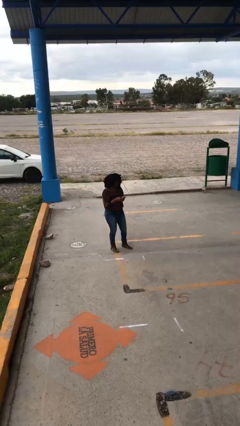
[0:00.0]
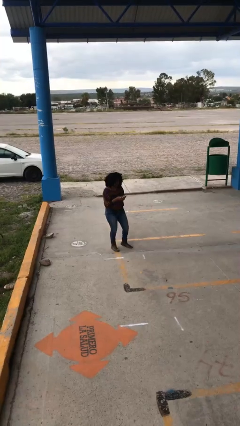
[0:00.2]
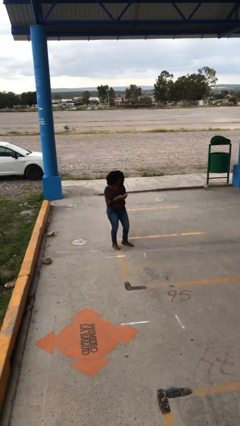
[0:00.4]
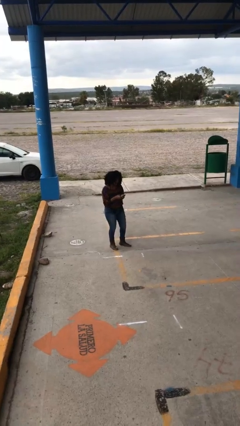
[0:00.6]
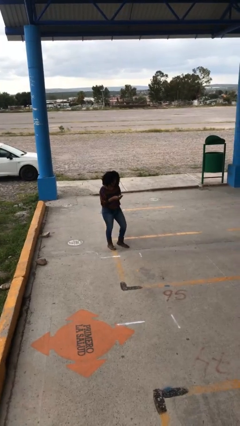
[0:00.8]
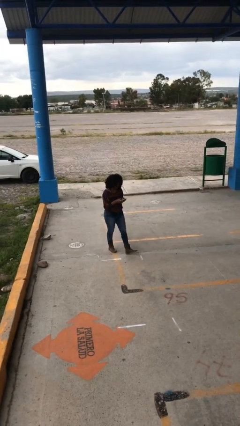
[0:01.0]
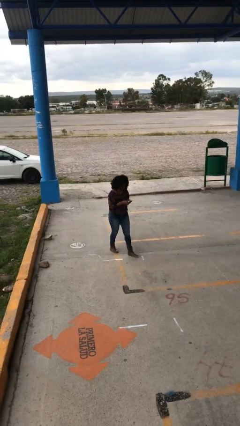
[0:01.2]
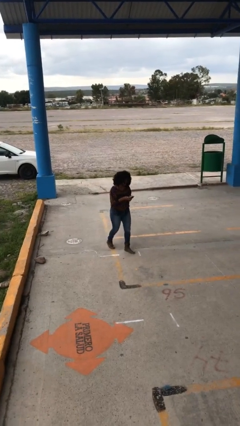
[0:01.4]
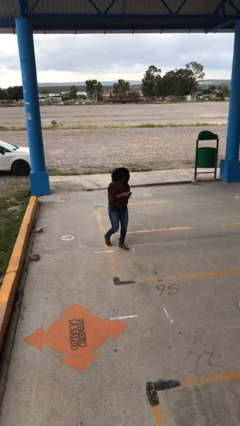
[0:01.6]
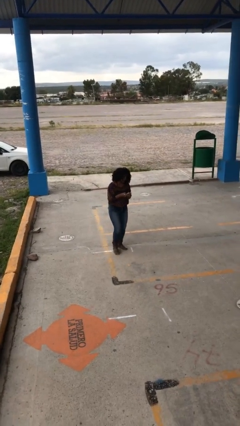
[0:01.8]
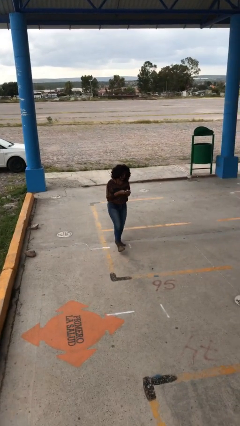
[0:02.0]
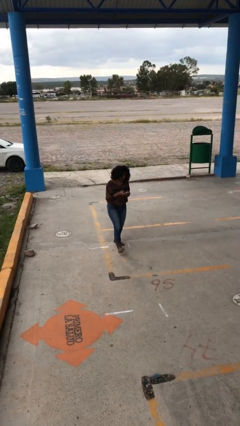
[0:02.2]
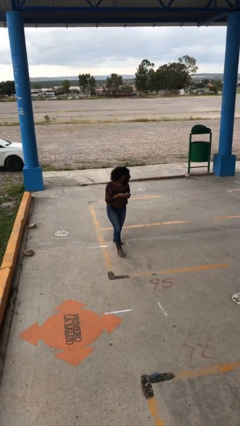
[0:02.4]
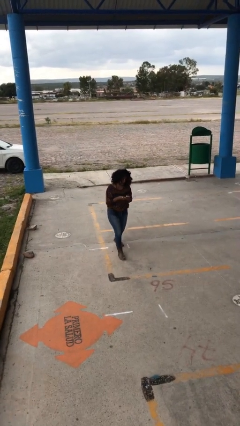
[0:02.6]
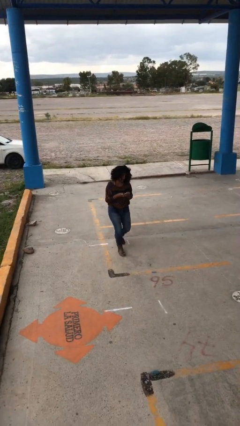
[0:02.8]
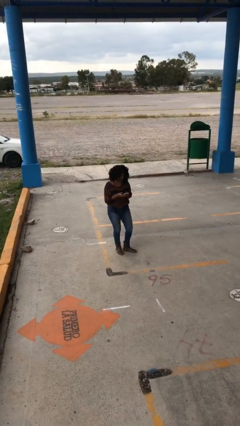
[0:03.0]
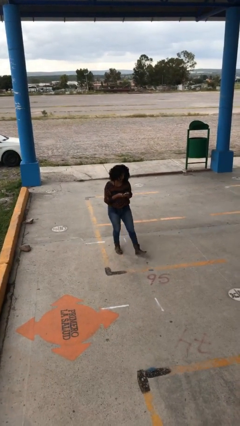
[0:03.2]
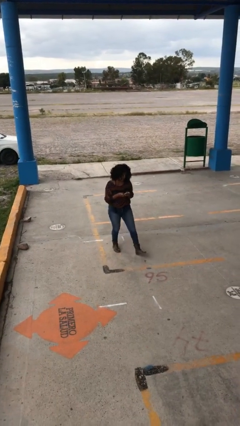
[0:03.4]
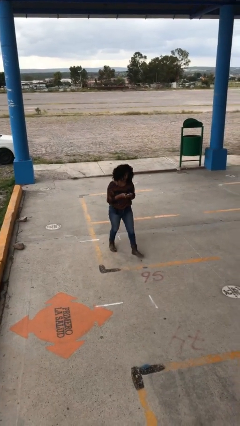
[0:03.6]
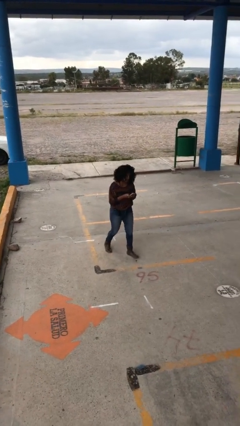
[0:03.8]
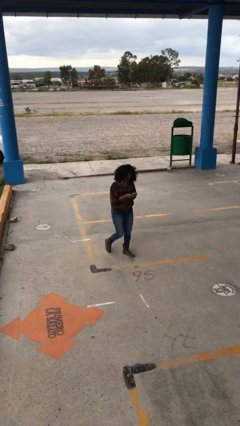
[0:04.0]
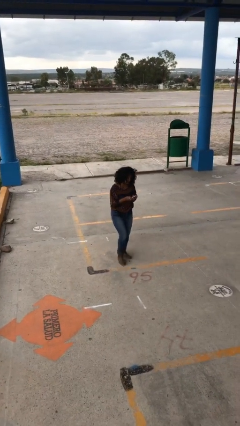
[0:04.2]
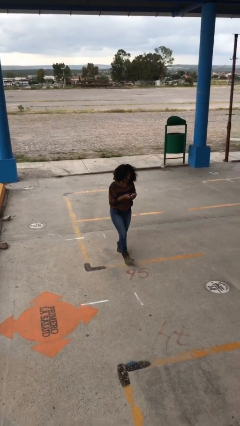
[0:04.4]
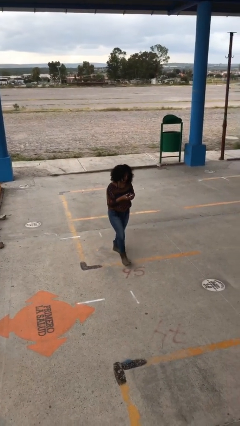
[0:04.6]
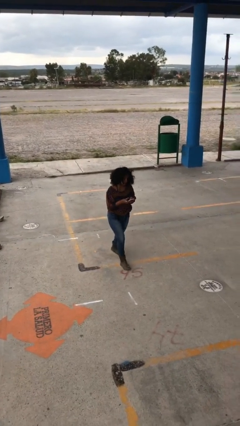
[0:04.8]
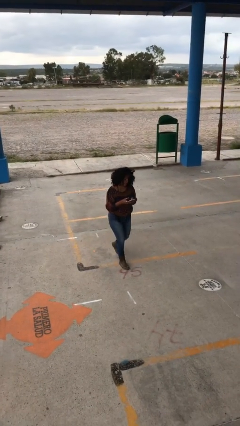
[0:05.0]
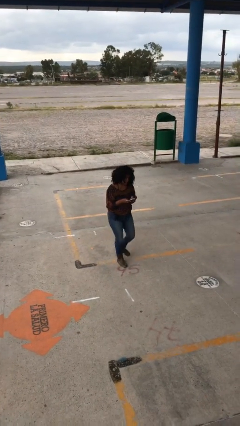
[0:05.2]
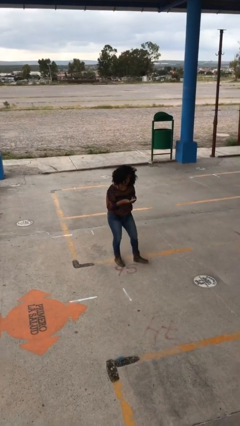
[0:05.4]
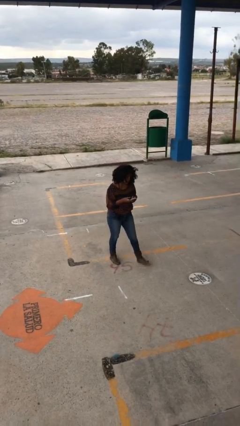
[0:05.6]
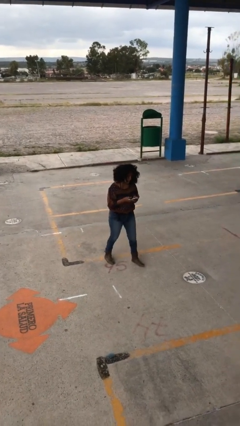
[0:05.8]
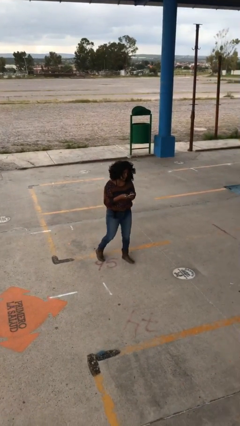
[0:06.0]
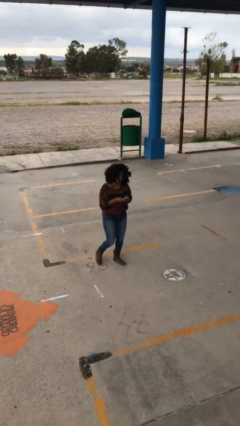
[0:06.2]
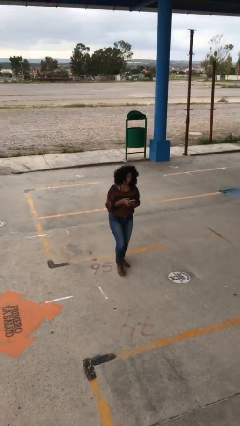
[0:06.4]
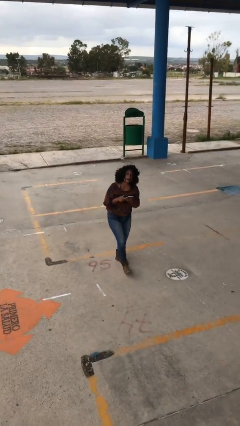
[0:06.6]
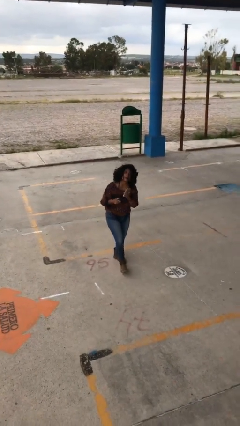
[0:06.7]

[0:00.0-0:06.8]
person texts on phone

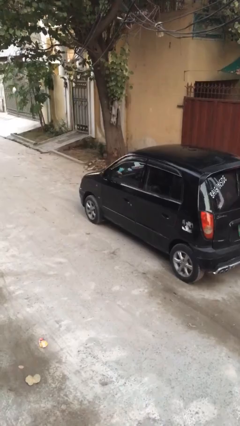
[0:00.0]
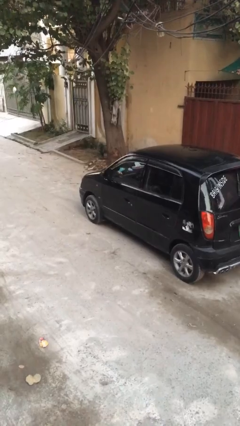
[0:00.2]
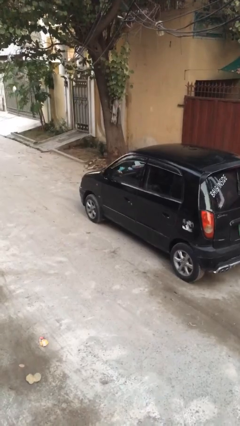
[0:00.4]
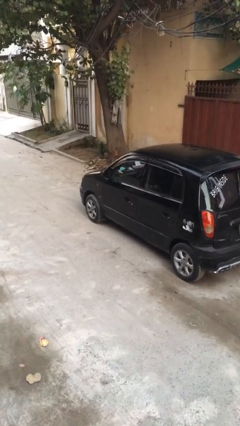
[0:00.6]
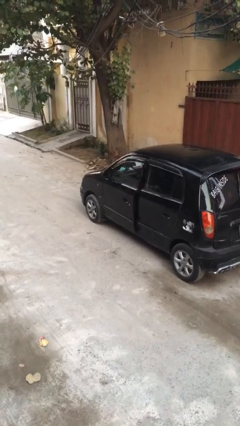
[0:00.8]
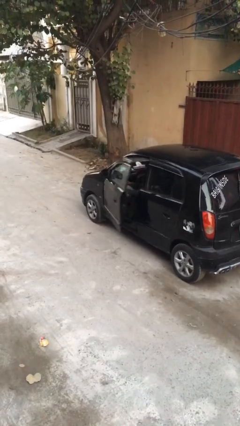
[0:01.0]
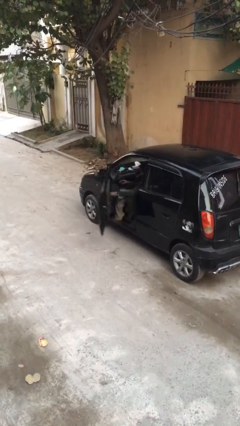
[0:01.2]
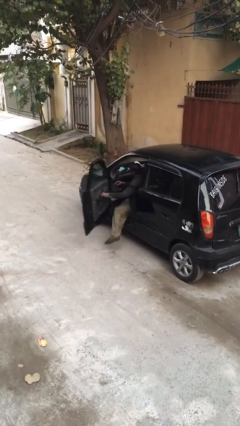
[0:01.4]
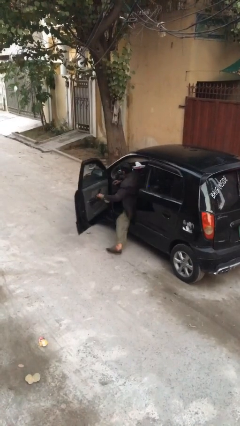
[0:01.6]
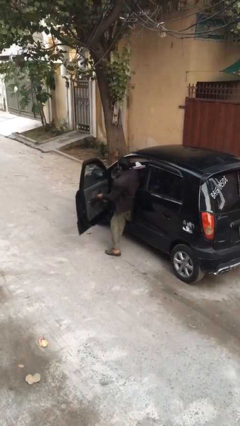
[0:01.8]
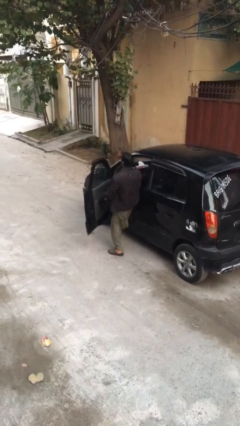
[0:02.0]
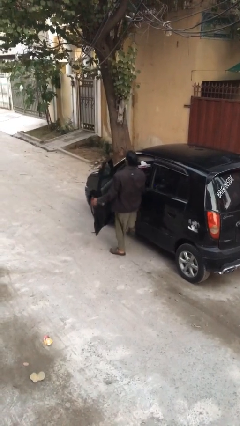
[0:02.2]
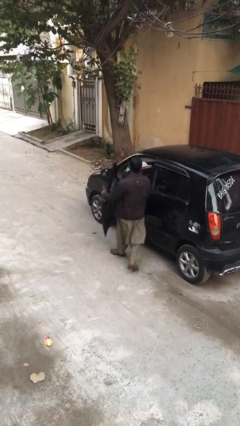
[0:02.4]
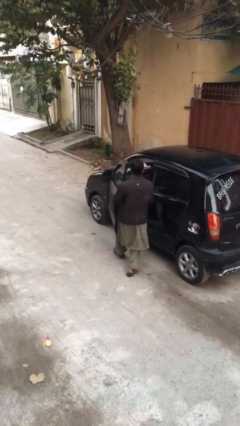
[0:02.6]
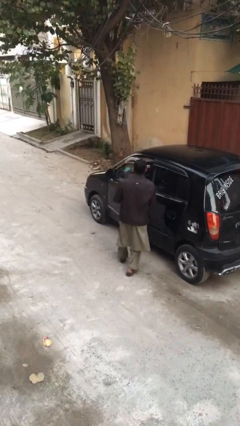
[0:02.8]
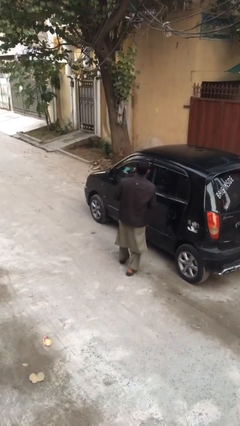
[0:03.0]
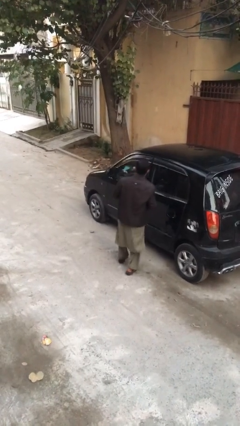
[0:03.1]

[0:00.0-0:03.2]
car drops off person

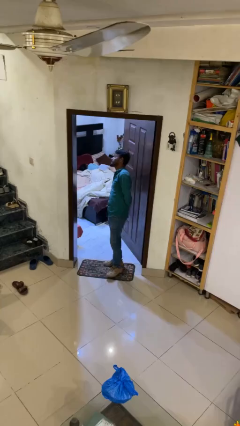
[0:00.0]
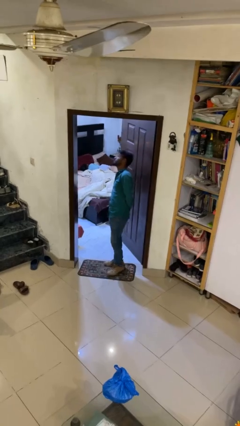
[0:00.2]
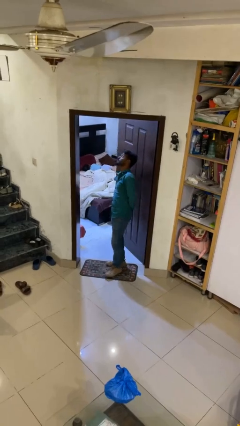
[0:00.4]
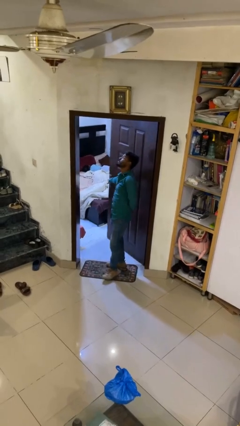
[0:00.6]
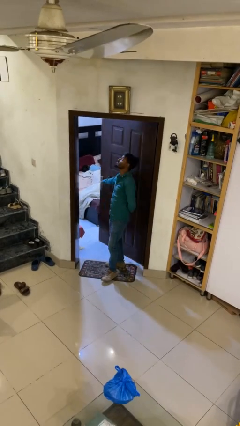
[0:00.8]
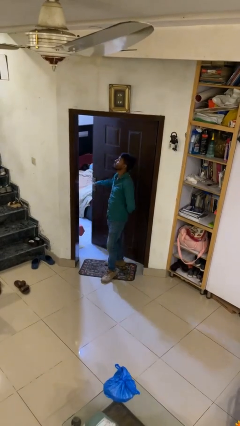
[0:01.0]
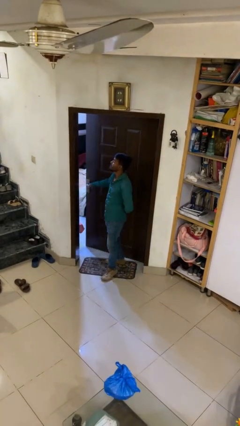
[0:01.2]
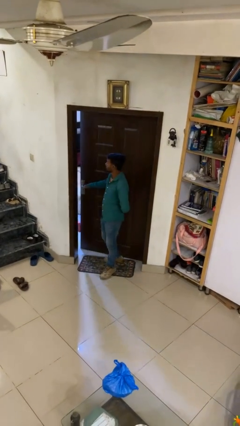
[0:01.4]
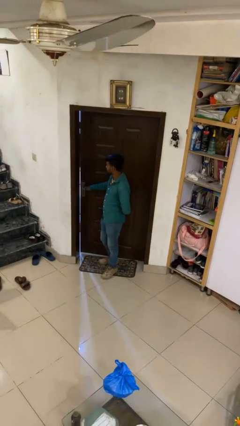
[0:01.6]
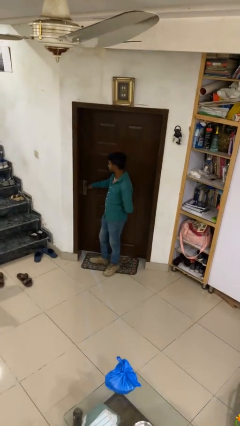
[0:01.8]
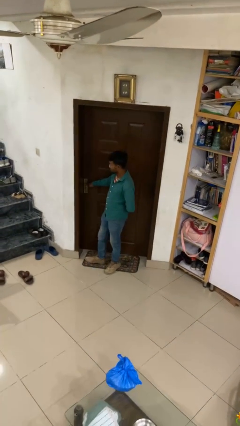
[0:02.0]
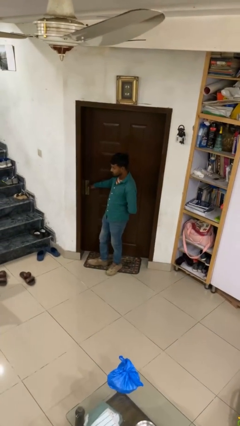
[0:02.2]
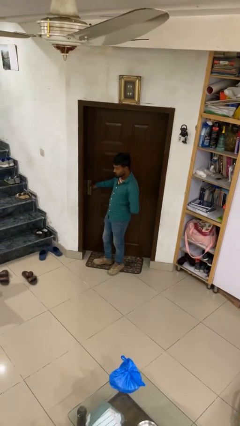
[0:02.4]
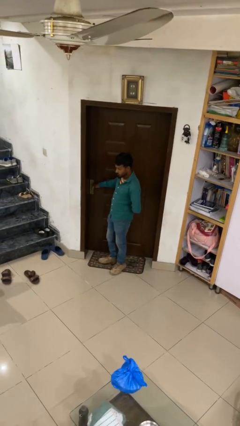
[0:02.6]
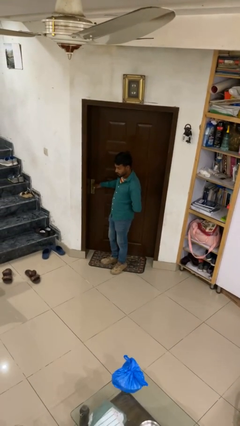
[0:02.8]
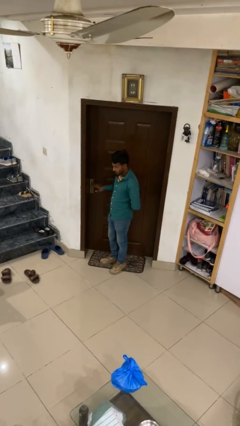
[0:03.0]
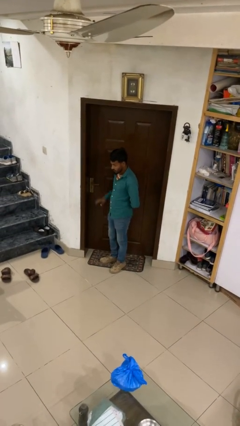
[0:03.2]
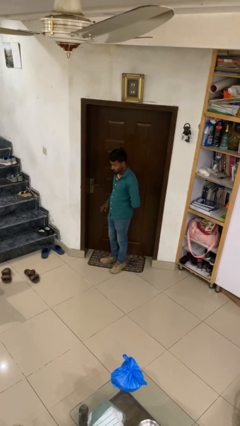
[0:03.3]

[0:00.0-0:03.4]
person closes facility door

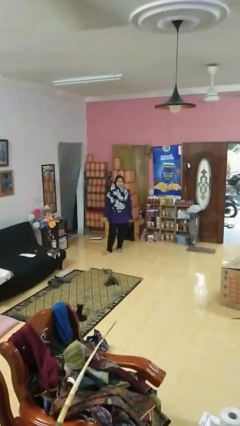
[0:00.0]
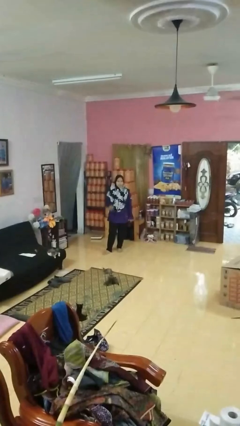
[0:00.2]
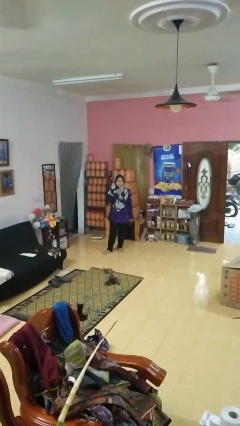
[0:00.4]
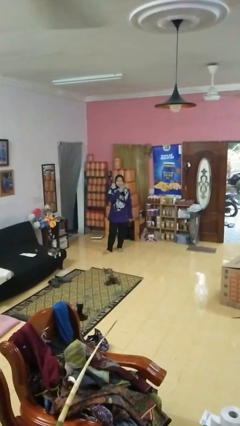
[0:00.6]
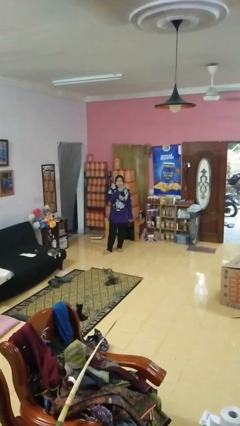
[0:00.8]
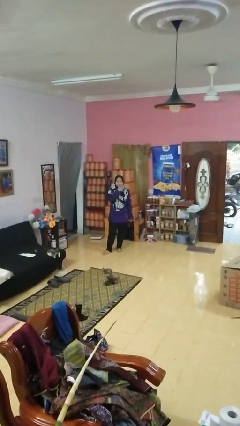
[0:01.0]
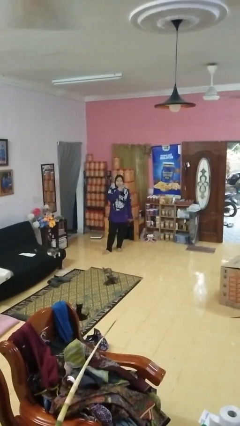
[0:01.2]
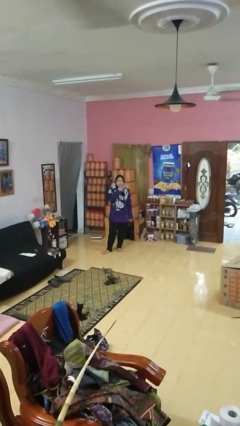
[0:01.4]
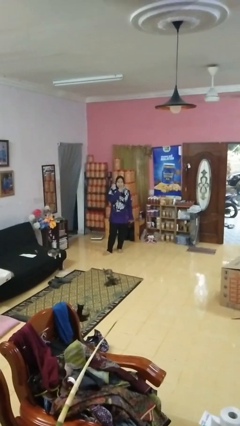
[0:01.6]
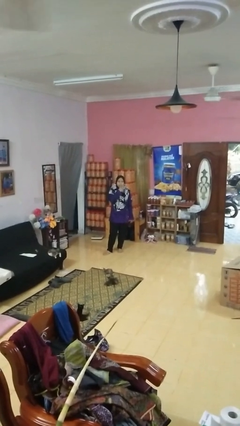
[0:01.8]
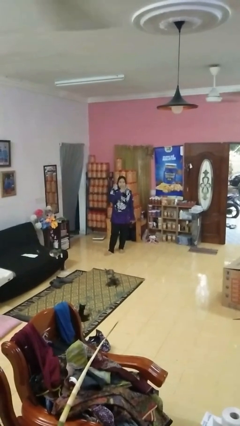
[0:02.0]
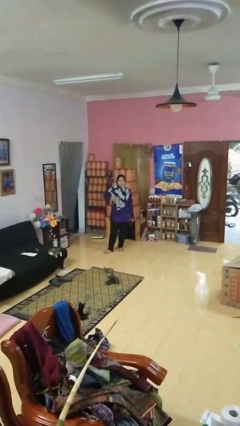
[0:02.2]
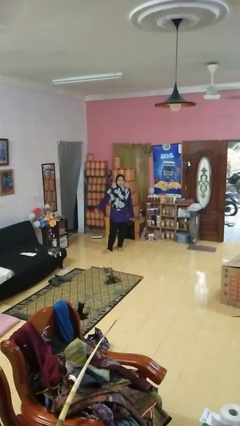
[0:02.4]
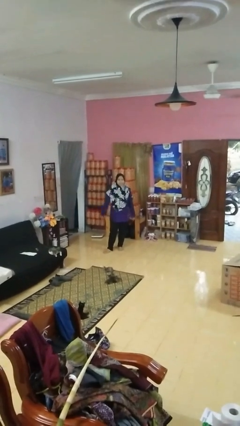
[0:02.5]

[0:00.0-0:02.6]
person gestures be quiet

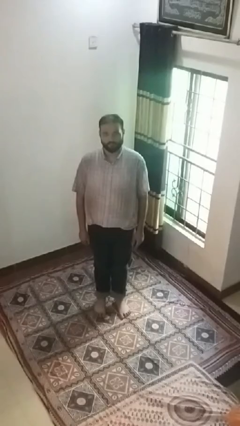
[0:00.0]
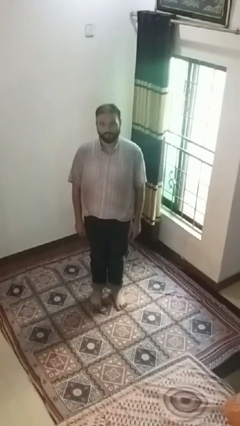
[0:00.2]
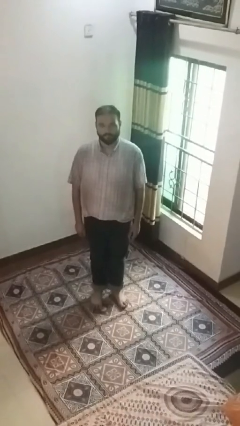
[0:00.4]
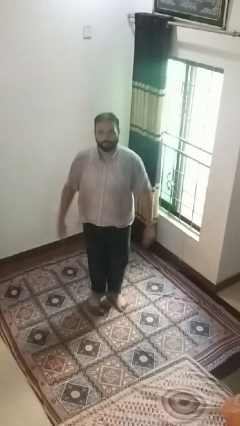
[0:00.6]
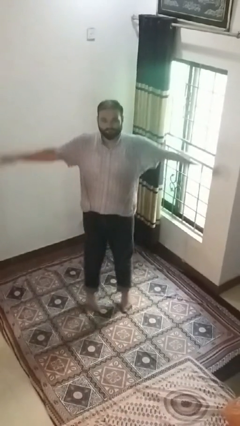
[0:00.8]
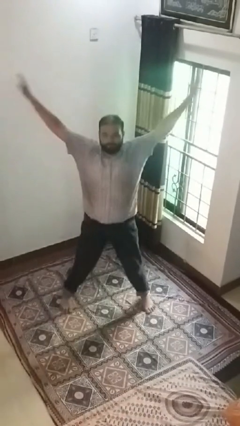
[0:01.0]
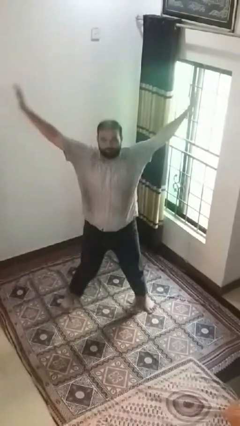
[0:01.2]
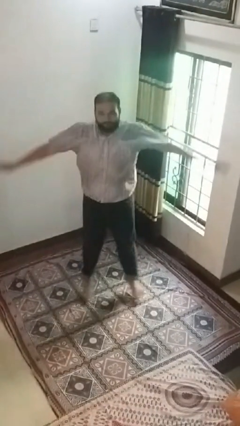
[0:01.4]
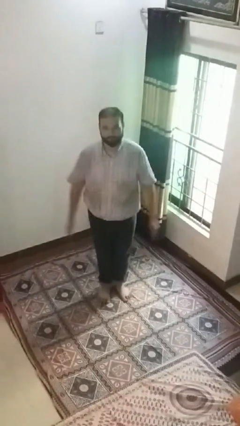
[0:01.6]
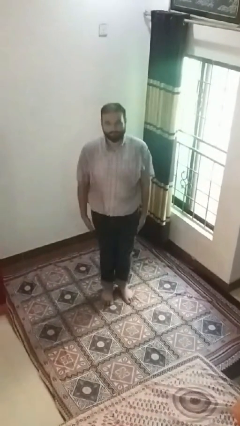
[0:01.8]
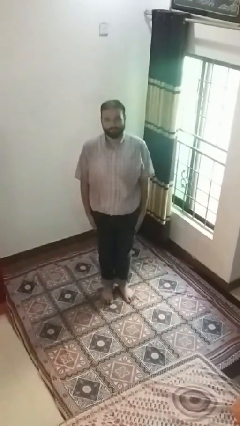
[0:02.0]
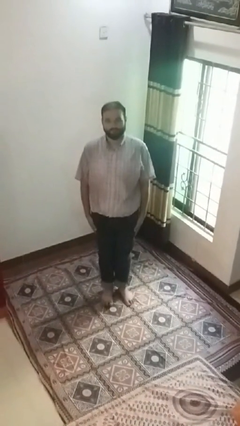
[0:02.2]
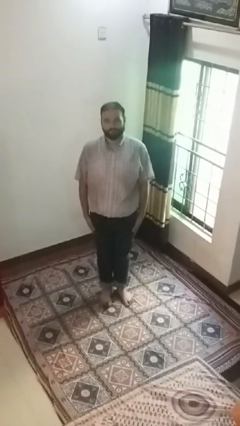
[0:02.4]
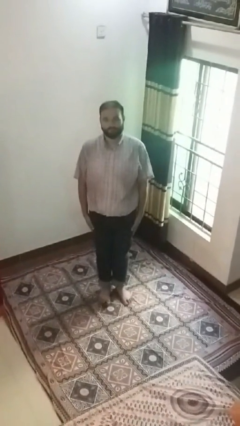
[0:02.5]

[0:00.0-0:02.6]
person exercises with jumping jacks
